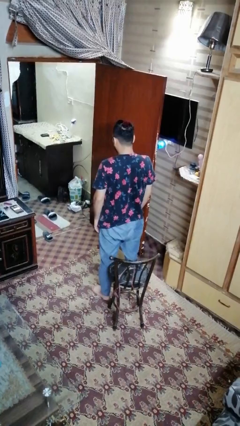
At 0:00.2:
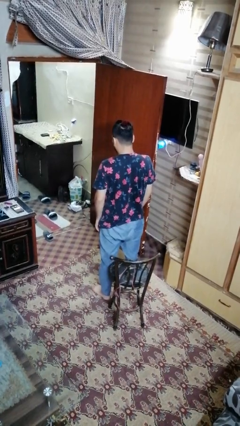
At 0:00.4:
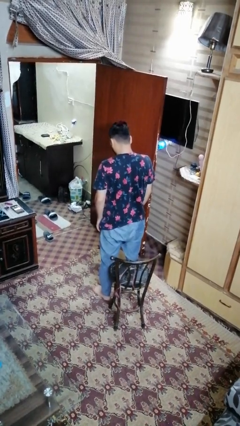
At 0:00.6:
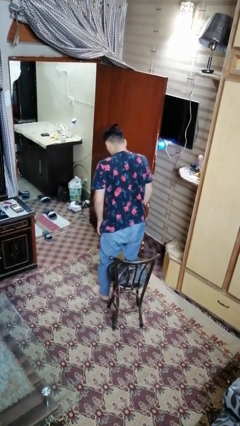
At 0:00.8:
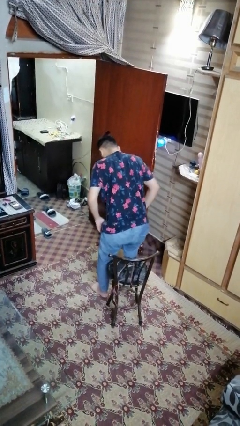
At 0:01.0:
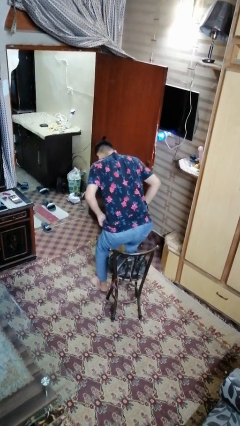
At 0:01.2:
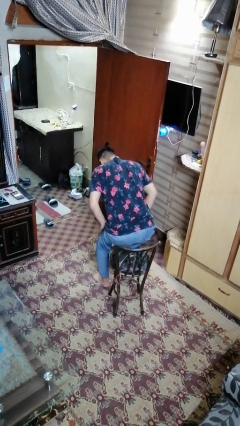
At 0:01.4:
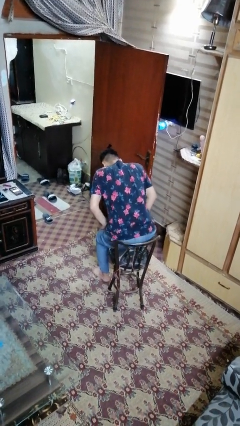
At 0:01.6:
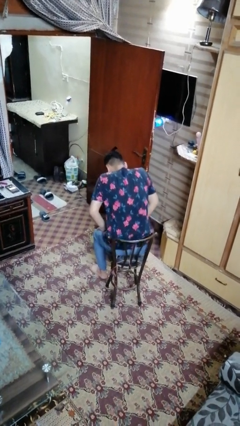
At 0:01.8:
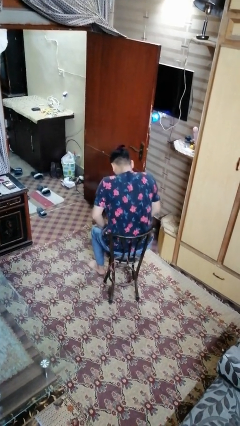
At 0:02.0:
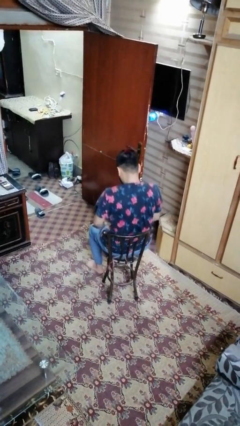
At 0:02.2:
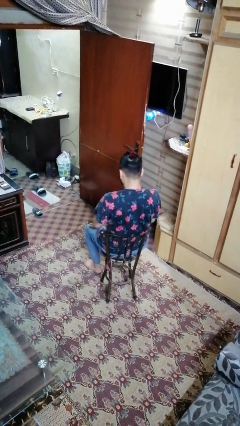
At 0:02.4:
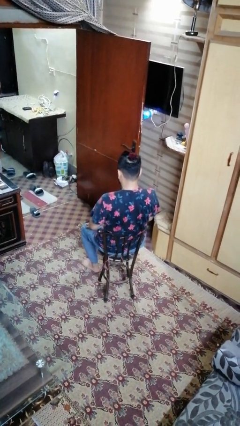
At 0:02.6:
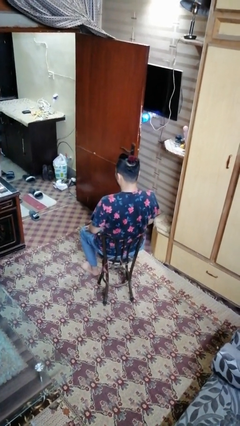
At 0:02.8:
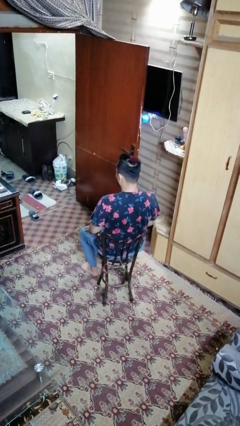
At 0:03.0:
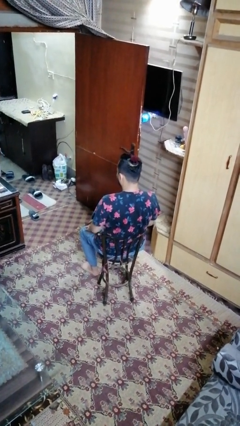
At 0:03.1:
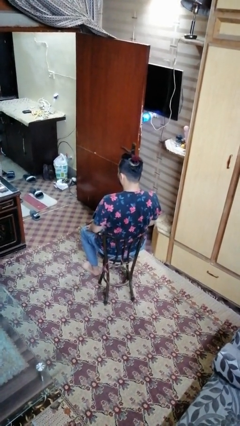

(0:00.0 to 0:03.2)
person sits down

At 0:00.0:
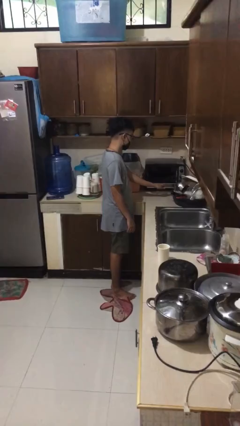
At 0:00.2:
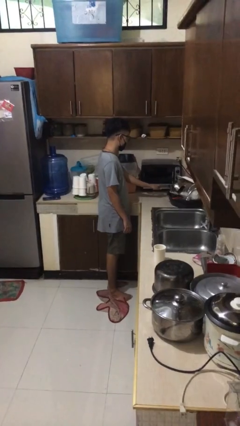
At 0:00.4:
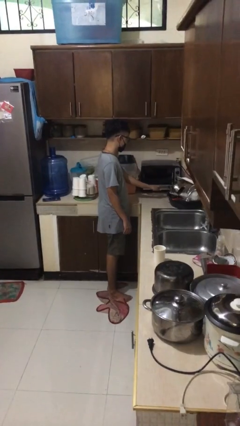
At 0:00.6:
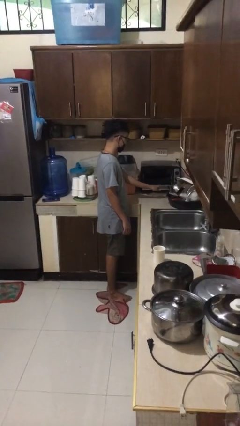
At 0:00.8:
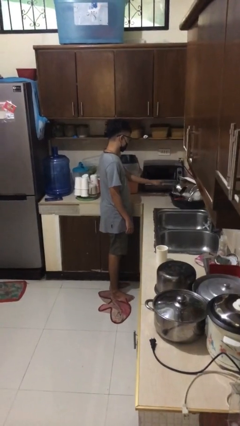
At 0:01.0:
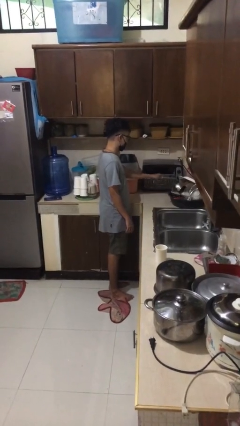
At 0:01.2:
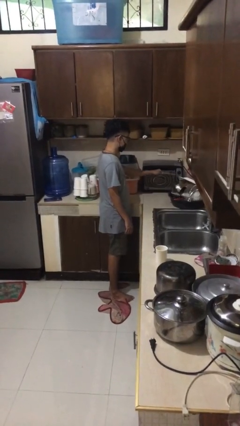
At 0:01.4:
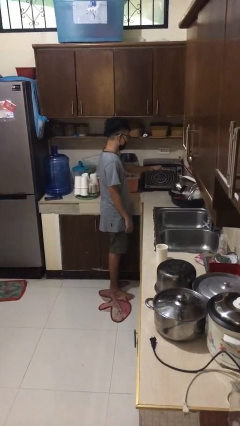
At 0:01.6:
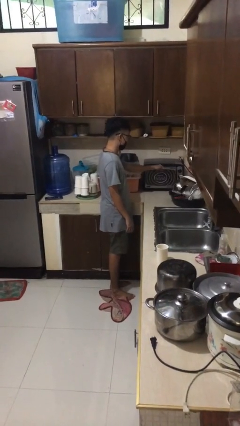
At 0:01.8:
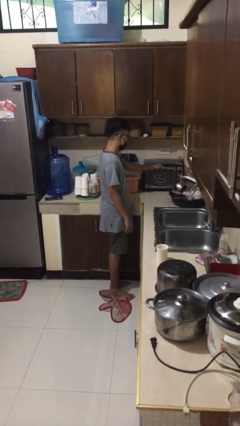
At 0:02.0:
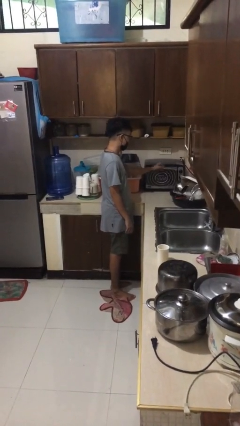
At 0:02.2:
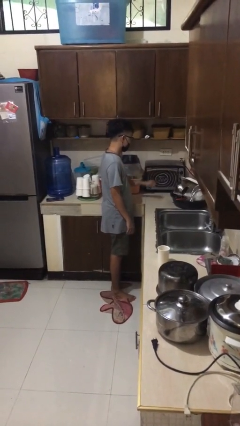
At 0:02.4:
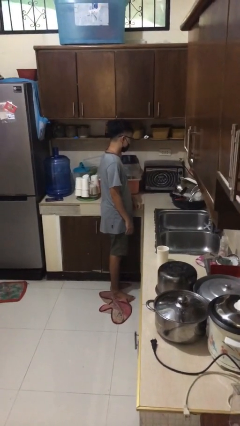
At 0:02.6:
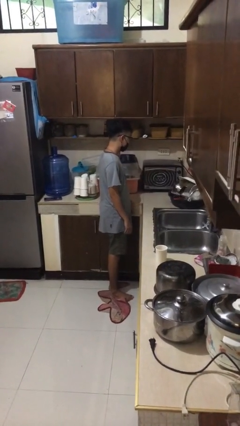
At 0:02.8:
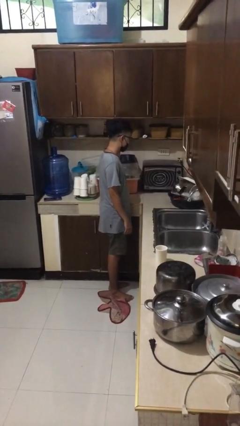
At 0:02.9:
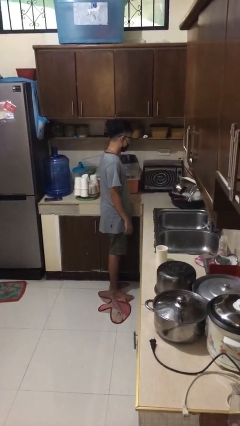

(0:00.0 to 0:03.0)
person closes microwave

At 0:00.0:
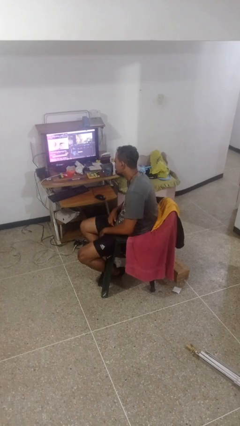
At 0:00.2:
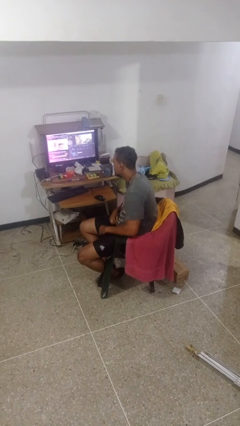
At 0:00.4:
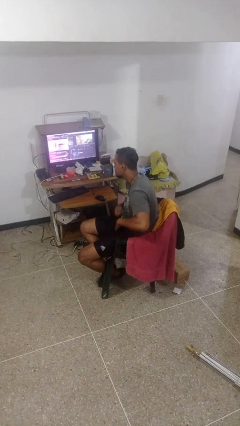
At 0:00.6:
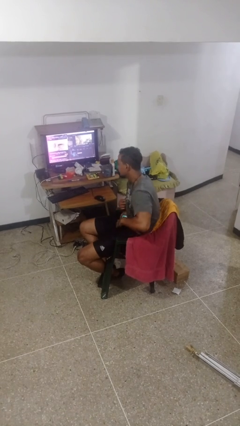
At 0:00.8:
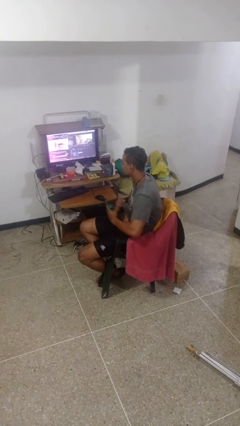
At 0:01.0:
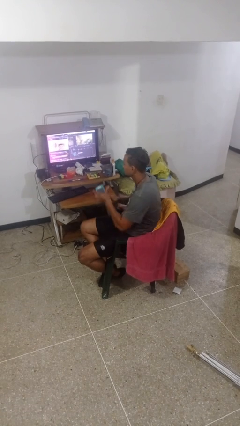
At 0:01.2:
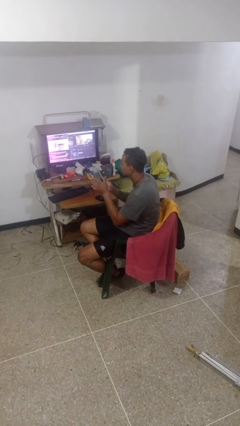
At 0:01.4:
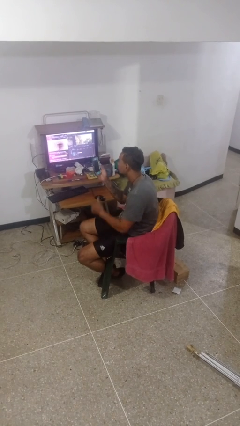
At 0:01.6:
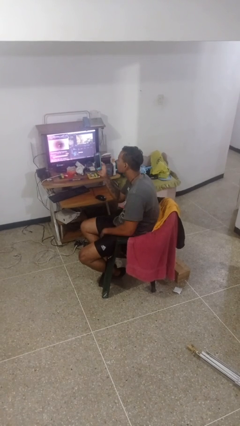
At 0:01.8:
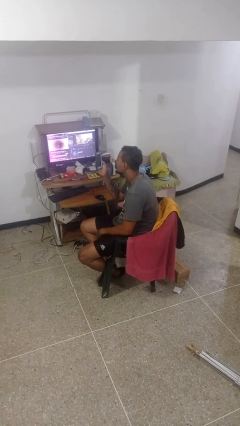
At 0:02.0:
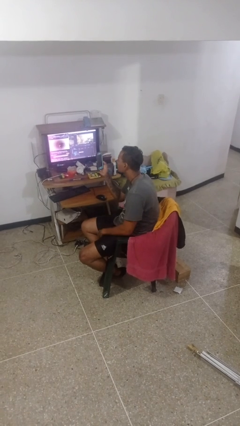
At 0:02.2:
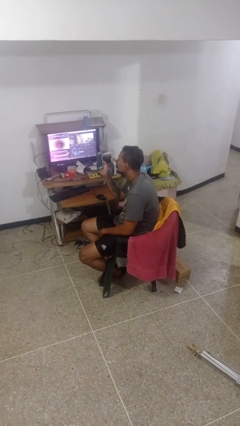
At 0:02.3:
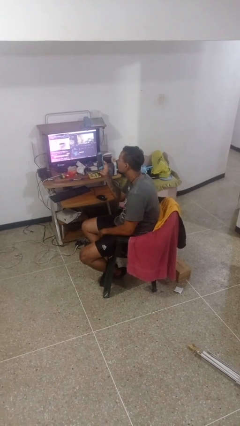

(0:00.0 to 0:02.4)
person takes phone from pocket

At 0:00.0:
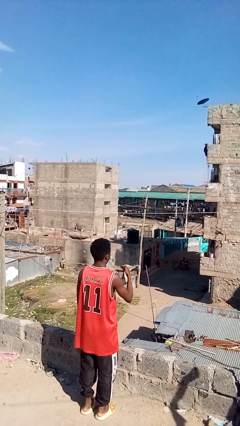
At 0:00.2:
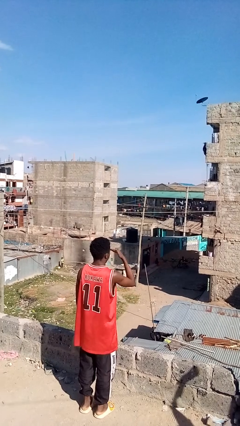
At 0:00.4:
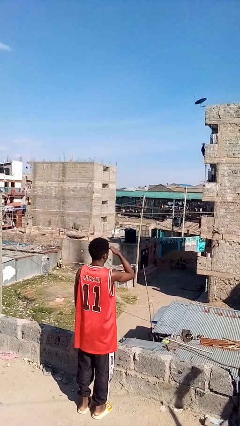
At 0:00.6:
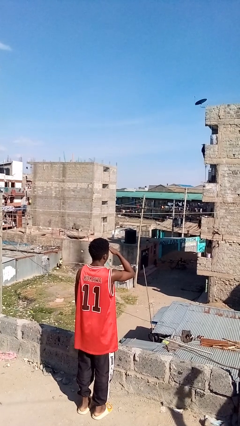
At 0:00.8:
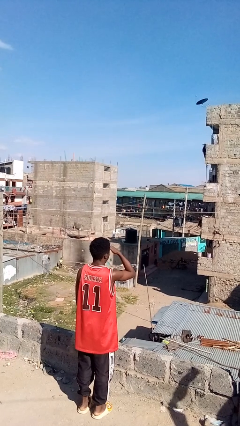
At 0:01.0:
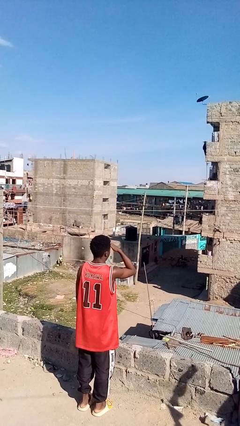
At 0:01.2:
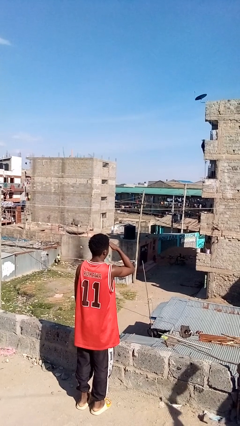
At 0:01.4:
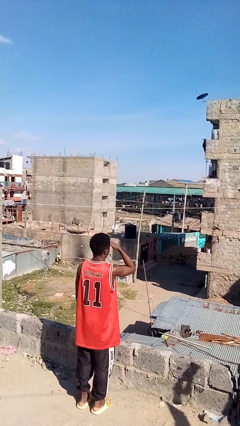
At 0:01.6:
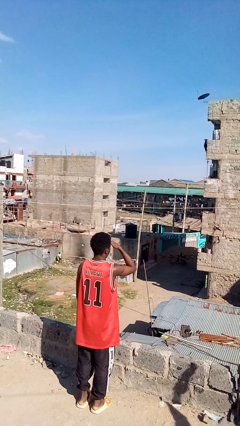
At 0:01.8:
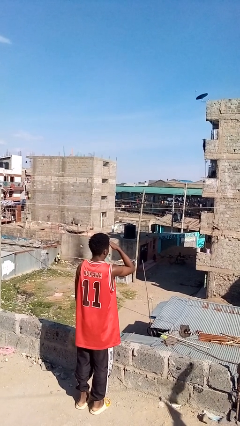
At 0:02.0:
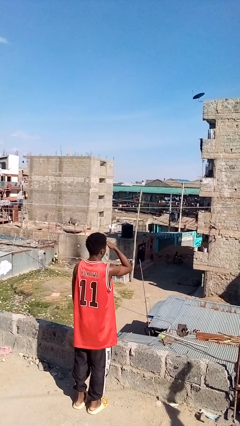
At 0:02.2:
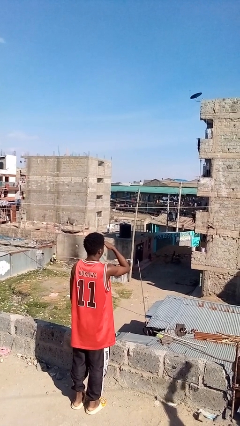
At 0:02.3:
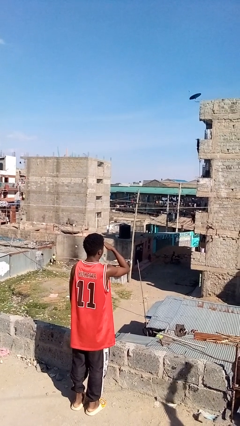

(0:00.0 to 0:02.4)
person shades eyes

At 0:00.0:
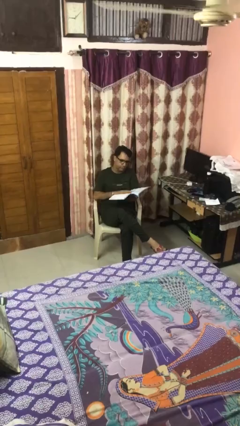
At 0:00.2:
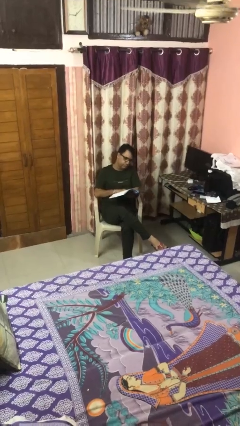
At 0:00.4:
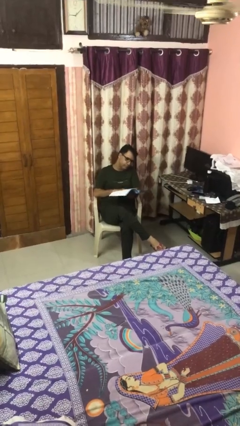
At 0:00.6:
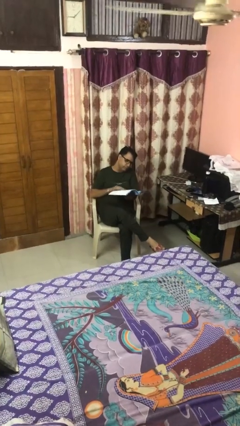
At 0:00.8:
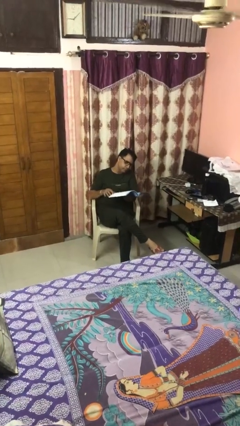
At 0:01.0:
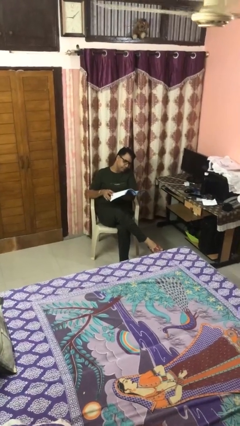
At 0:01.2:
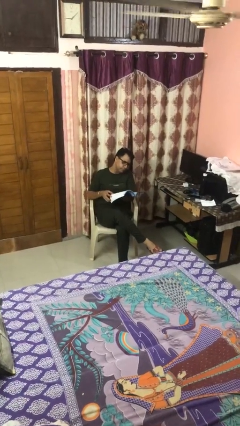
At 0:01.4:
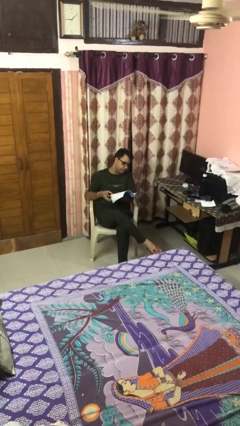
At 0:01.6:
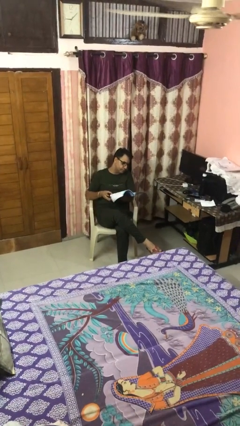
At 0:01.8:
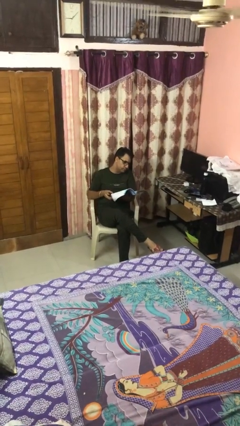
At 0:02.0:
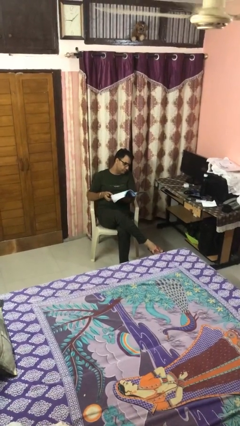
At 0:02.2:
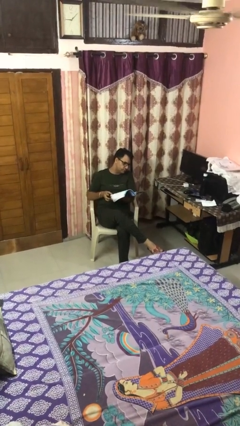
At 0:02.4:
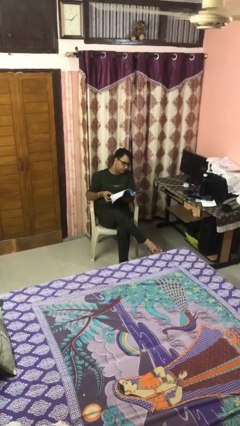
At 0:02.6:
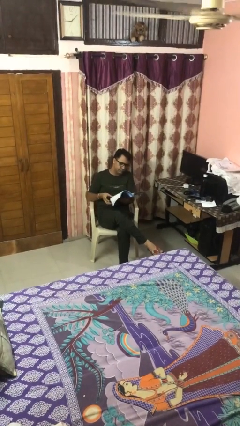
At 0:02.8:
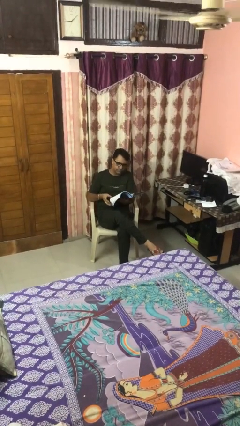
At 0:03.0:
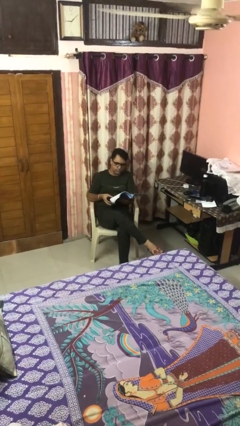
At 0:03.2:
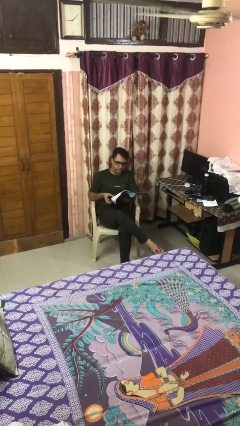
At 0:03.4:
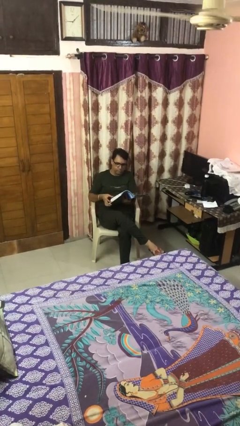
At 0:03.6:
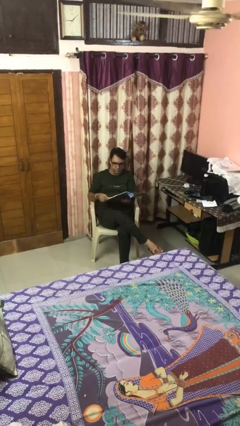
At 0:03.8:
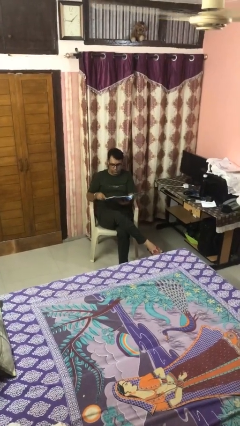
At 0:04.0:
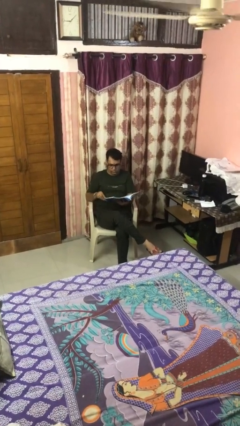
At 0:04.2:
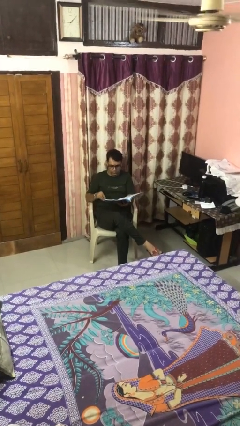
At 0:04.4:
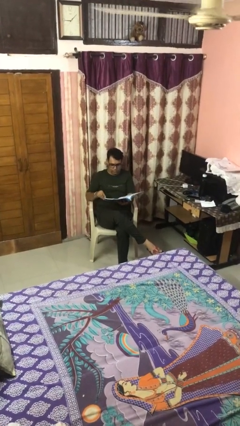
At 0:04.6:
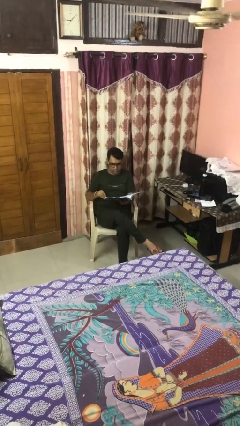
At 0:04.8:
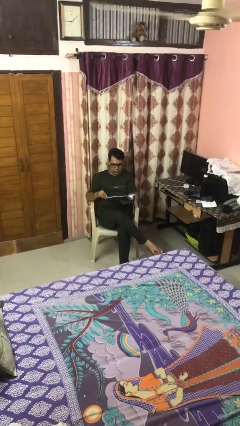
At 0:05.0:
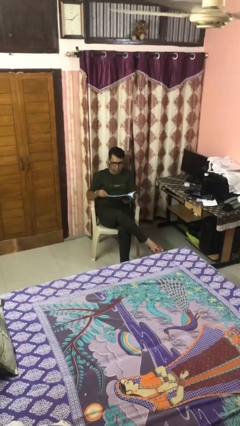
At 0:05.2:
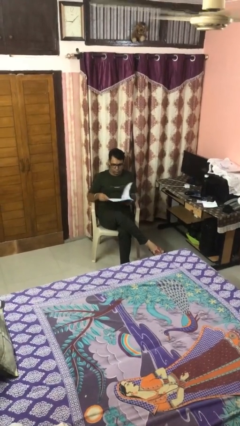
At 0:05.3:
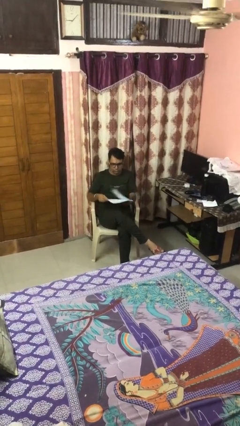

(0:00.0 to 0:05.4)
person reads book

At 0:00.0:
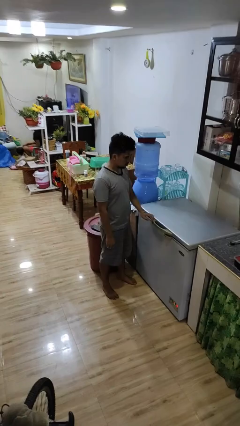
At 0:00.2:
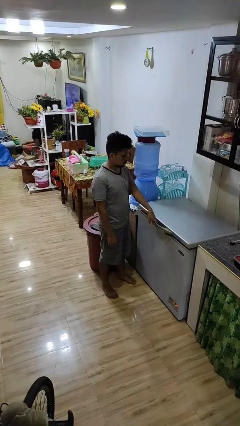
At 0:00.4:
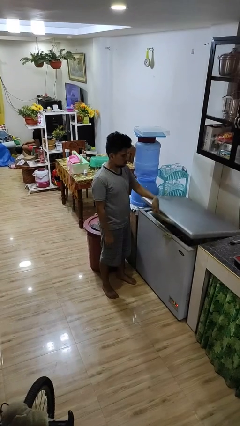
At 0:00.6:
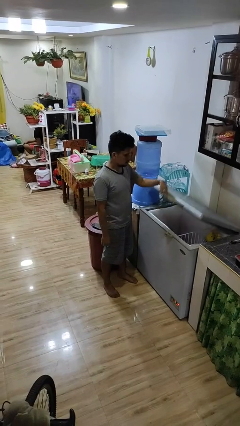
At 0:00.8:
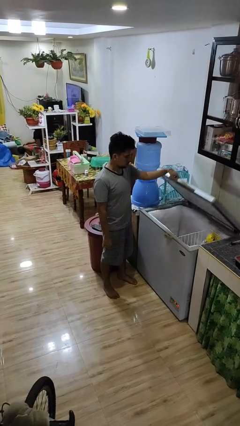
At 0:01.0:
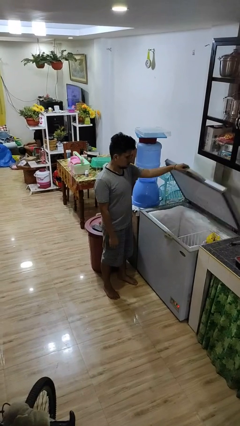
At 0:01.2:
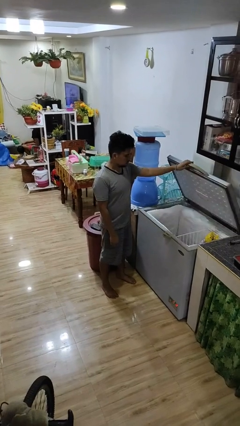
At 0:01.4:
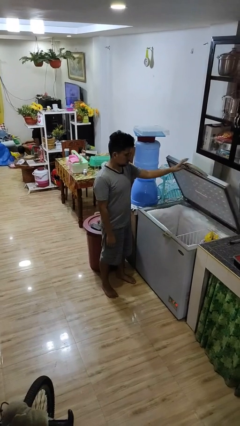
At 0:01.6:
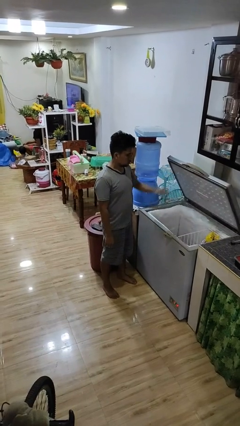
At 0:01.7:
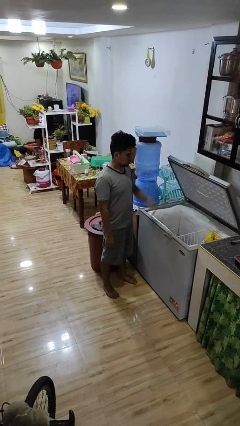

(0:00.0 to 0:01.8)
person opens refrigerator
